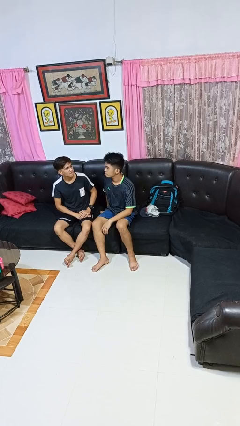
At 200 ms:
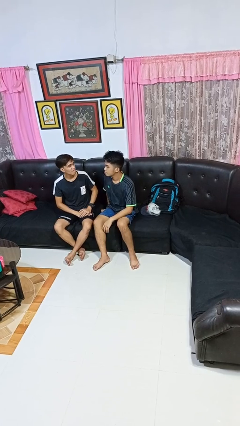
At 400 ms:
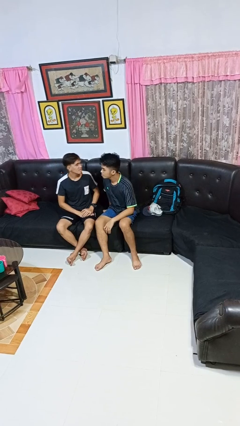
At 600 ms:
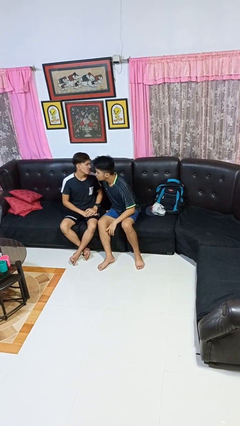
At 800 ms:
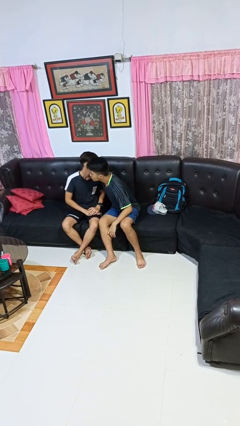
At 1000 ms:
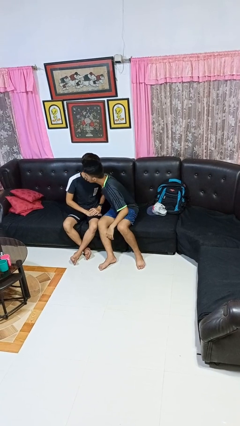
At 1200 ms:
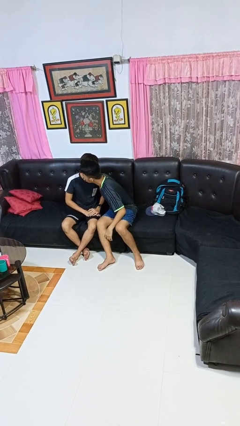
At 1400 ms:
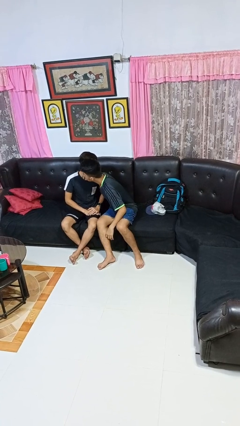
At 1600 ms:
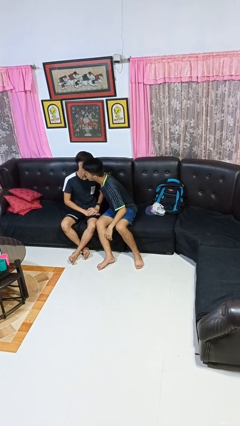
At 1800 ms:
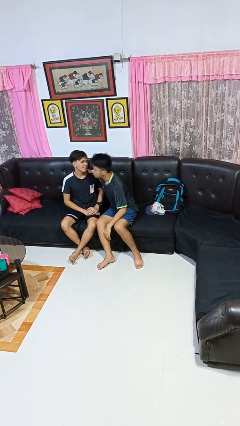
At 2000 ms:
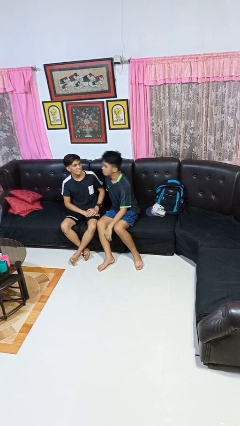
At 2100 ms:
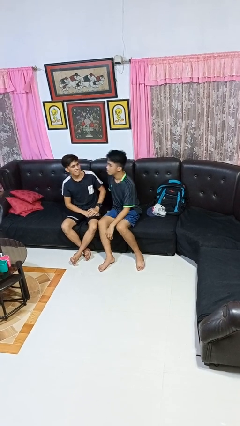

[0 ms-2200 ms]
person kisses cheek of person

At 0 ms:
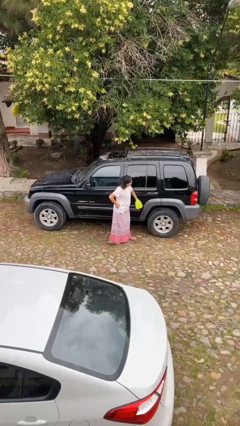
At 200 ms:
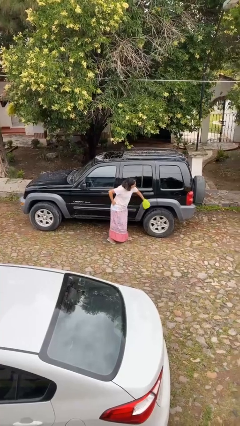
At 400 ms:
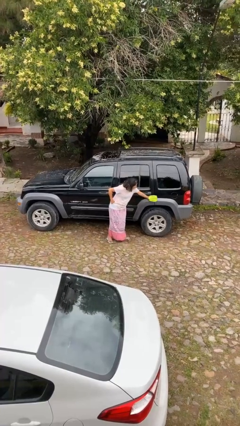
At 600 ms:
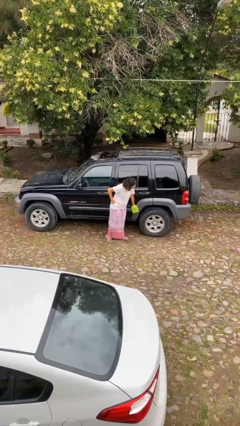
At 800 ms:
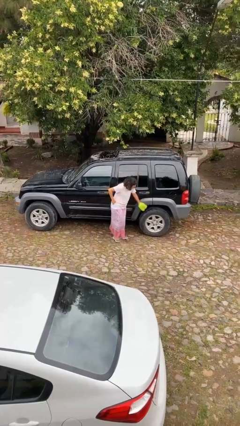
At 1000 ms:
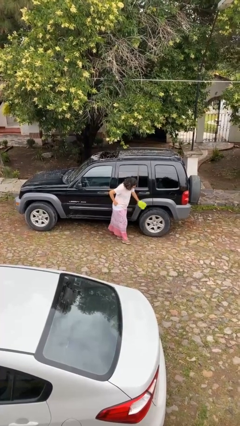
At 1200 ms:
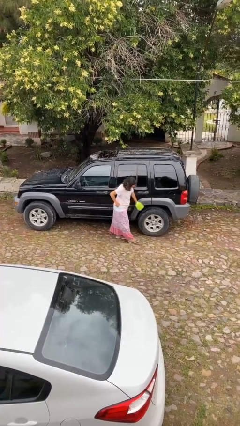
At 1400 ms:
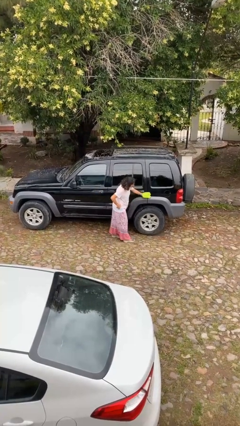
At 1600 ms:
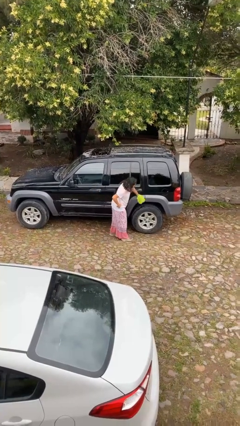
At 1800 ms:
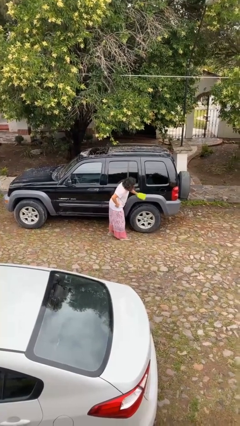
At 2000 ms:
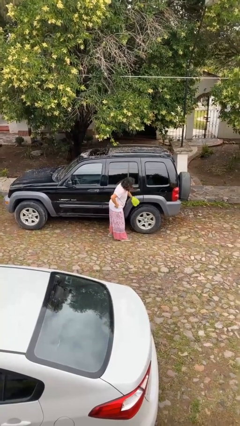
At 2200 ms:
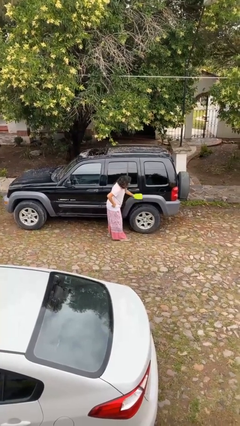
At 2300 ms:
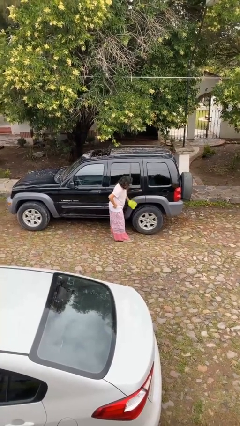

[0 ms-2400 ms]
person polishes car with rag

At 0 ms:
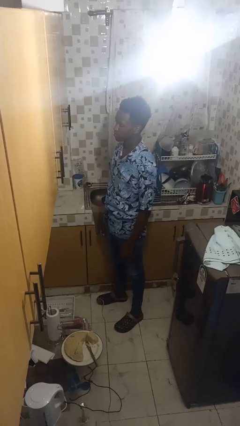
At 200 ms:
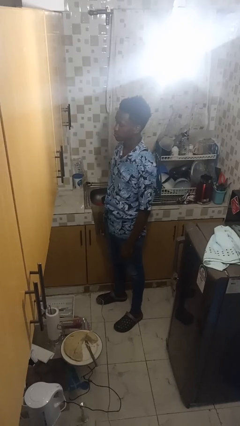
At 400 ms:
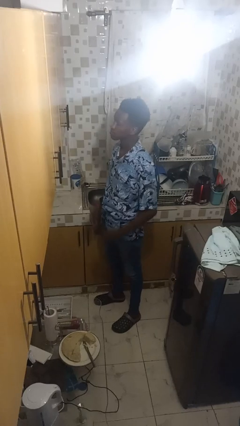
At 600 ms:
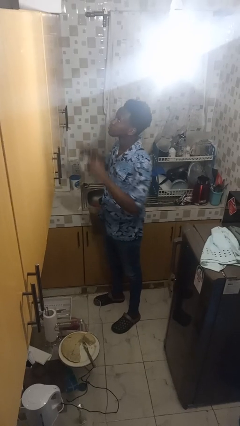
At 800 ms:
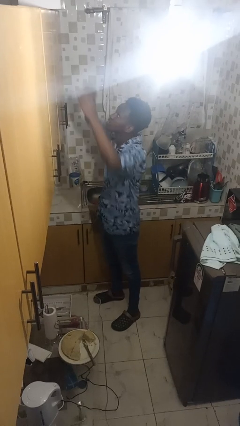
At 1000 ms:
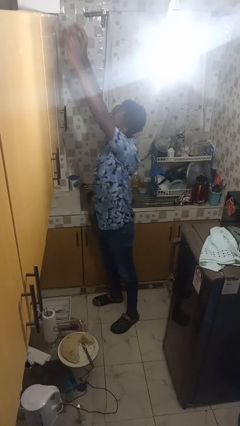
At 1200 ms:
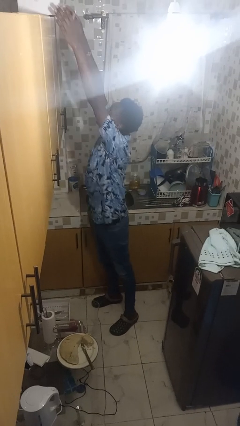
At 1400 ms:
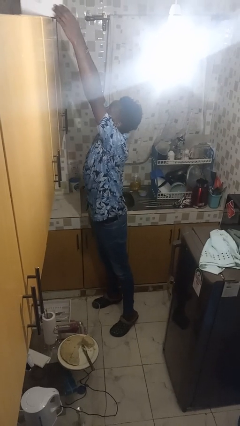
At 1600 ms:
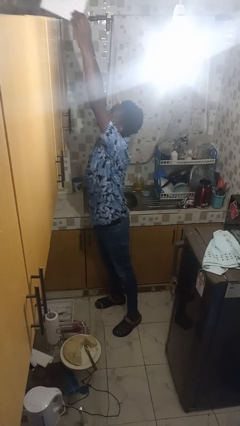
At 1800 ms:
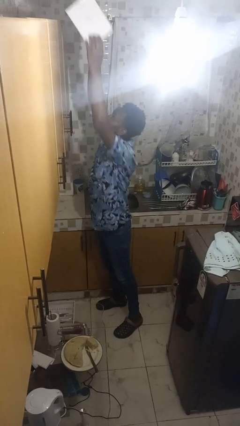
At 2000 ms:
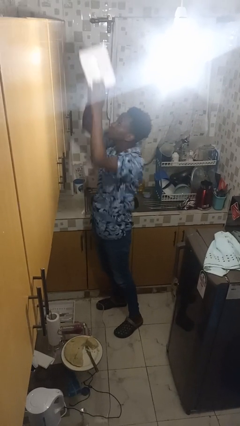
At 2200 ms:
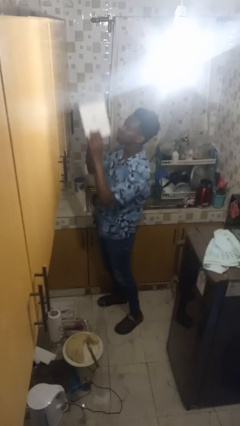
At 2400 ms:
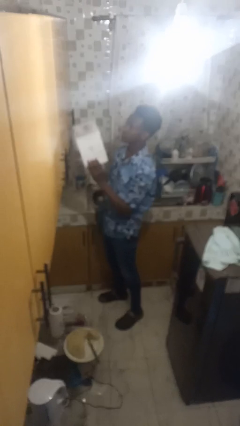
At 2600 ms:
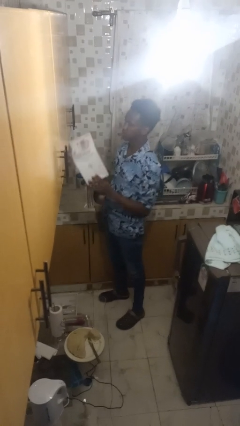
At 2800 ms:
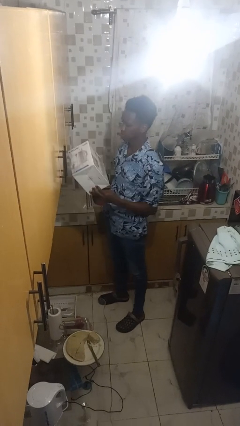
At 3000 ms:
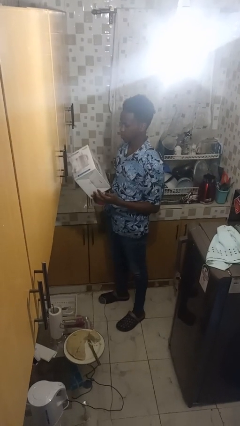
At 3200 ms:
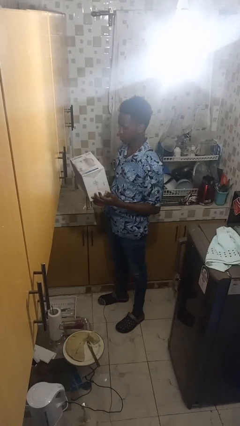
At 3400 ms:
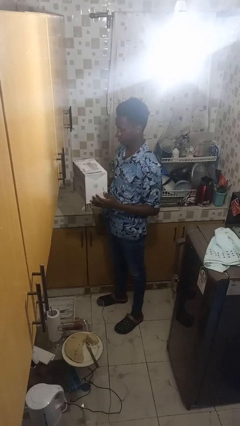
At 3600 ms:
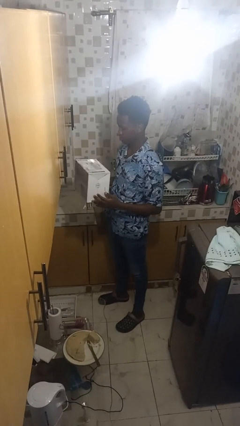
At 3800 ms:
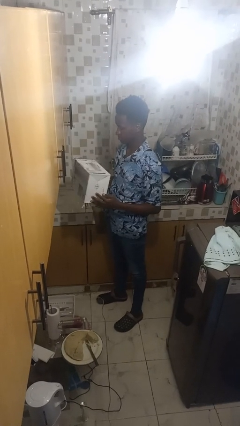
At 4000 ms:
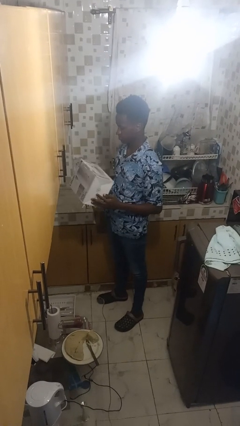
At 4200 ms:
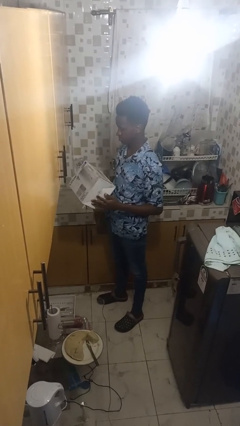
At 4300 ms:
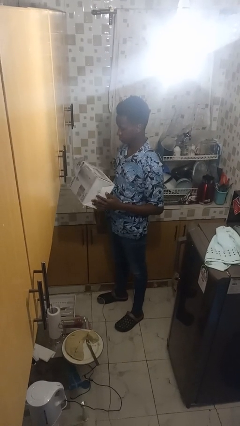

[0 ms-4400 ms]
person picks up object from shelf

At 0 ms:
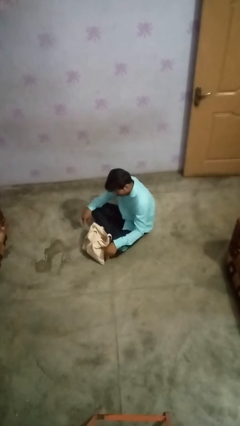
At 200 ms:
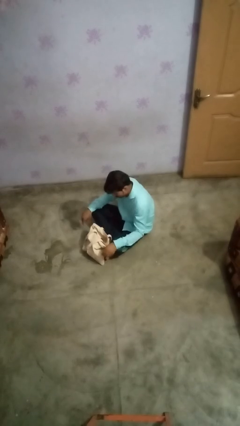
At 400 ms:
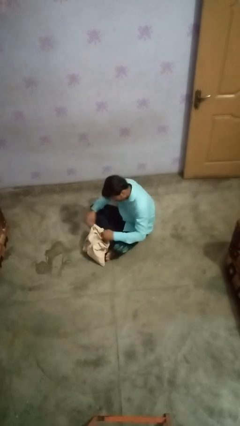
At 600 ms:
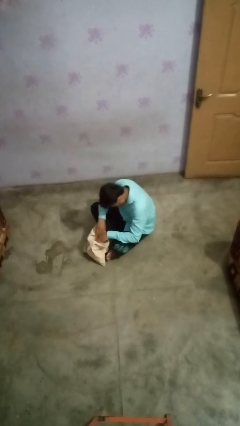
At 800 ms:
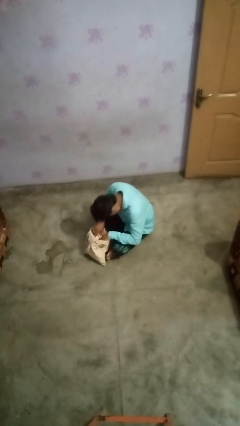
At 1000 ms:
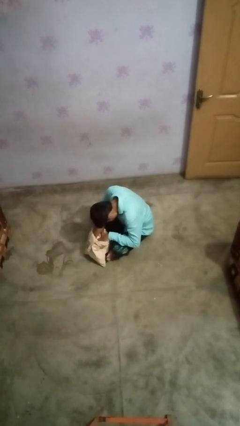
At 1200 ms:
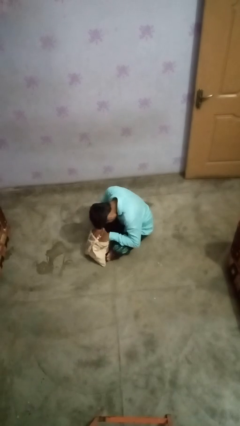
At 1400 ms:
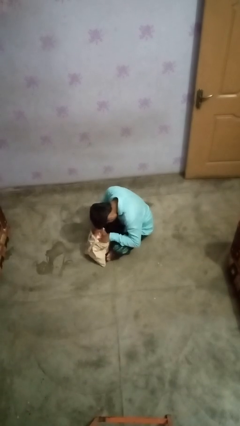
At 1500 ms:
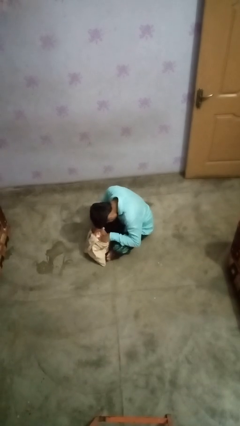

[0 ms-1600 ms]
person searches in bag

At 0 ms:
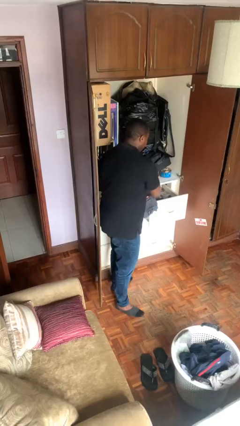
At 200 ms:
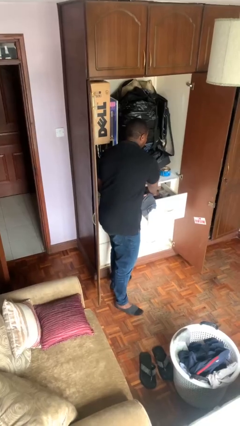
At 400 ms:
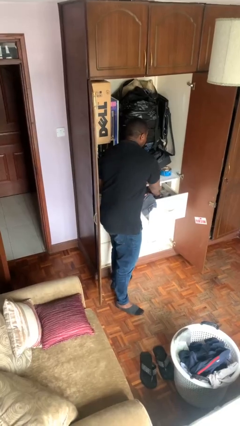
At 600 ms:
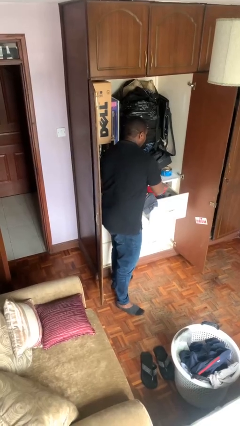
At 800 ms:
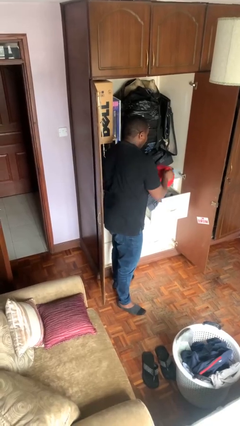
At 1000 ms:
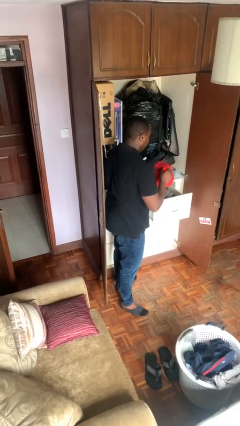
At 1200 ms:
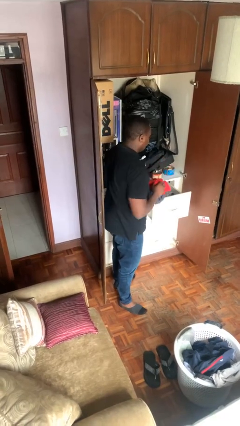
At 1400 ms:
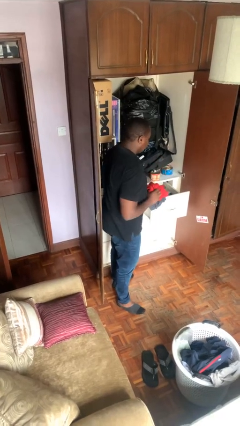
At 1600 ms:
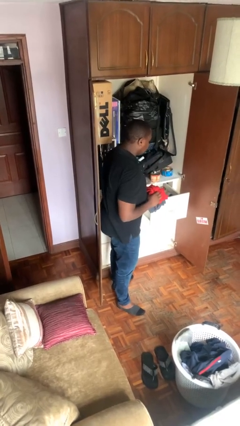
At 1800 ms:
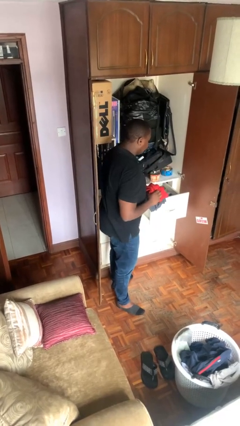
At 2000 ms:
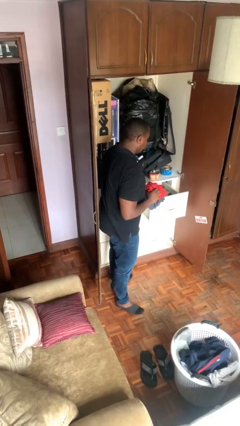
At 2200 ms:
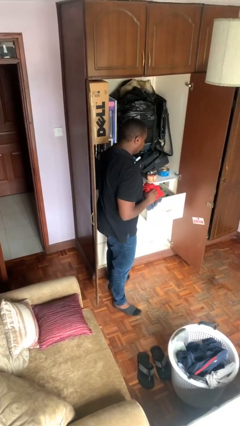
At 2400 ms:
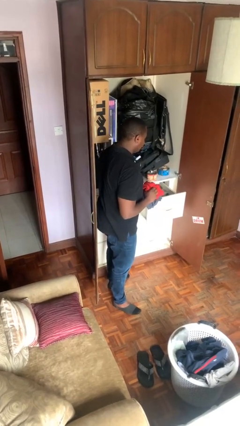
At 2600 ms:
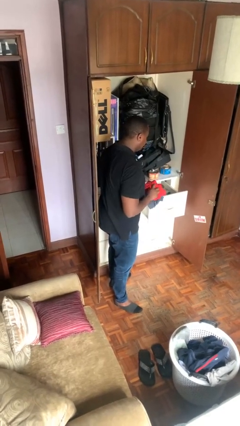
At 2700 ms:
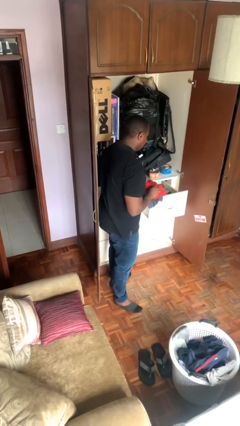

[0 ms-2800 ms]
person takes clothes from dresser

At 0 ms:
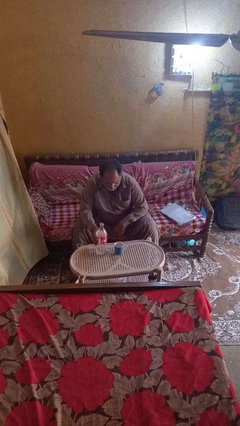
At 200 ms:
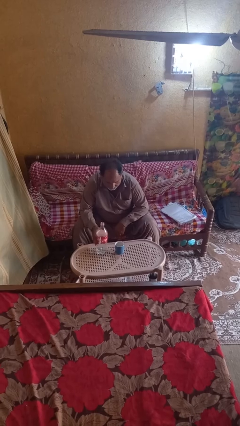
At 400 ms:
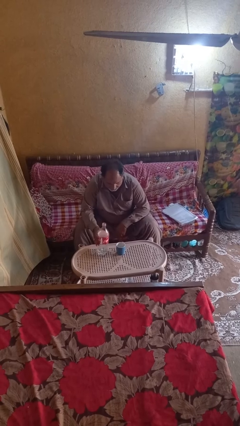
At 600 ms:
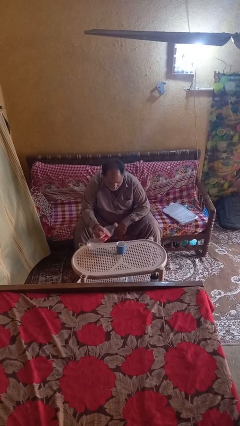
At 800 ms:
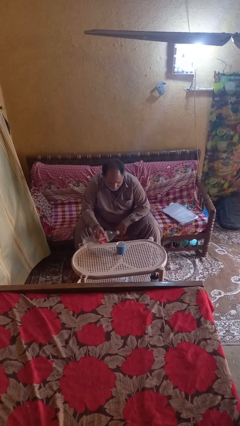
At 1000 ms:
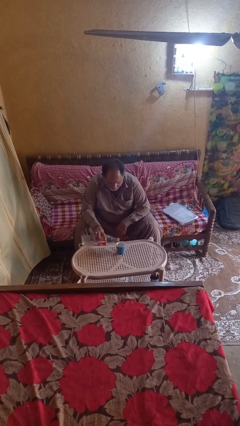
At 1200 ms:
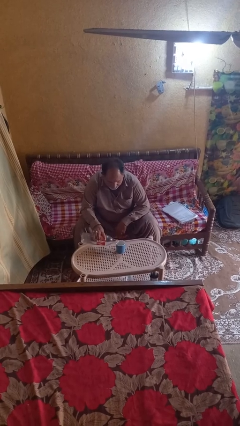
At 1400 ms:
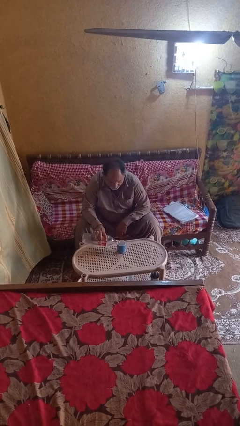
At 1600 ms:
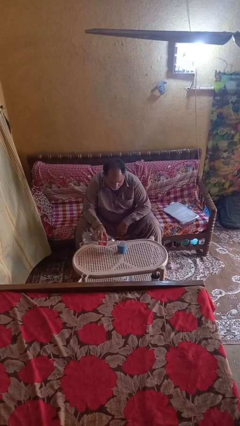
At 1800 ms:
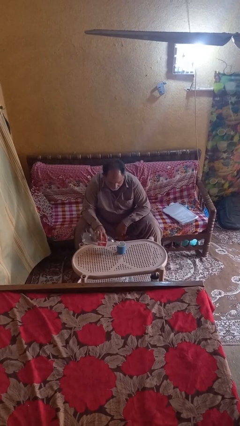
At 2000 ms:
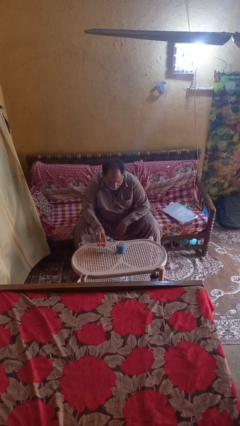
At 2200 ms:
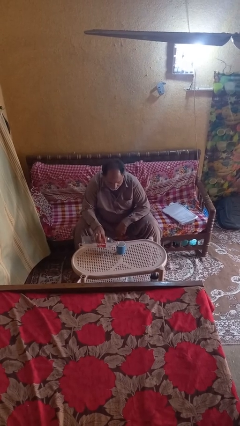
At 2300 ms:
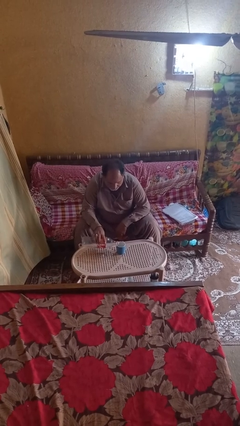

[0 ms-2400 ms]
person pours liquid into cup

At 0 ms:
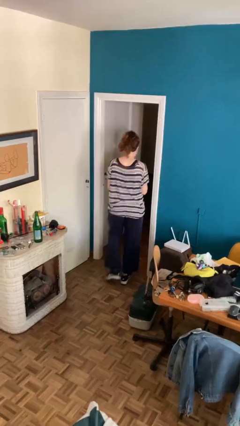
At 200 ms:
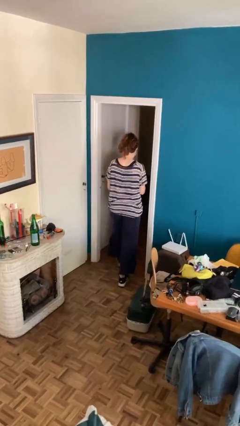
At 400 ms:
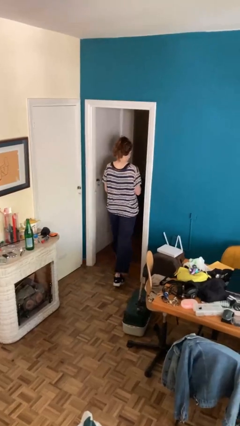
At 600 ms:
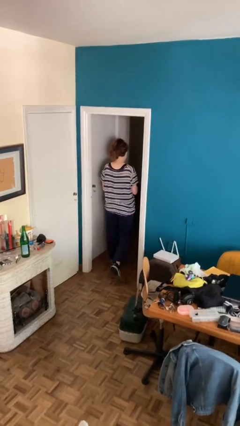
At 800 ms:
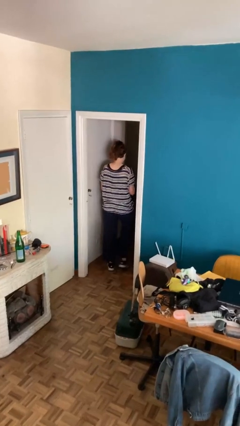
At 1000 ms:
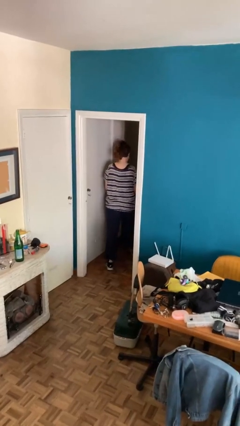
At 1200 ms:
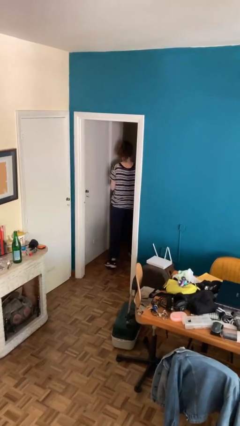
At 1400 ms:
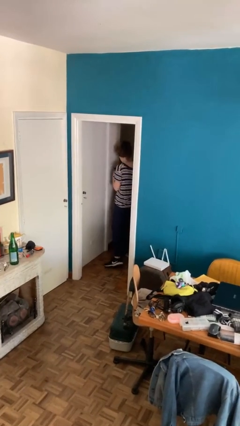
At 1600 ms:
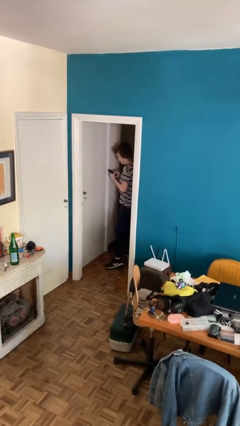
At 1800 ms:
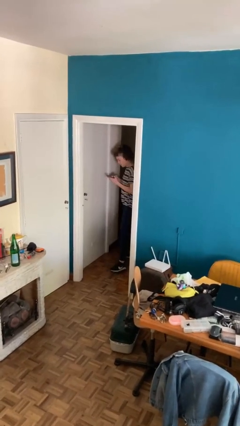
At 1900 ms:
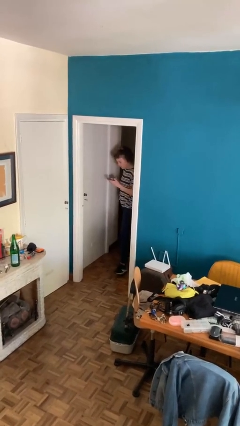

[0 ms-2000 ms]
person enters scene through structure
